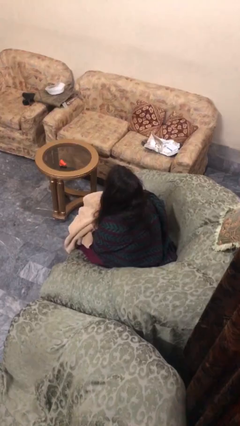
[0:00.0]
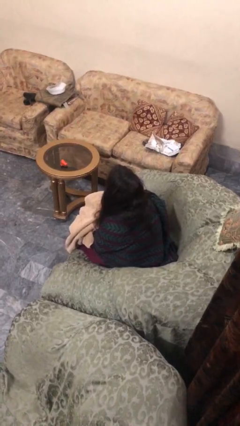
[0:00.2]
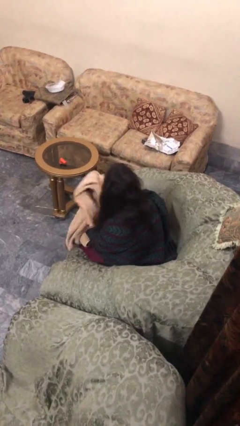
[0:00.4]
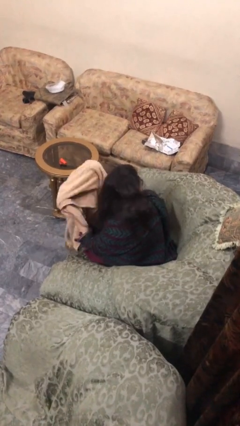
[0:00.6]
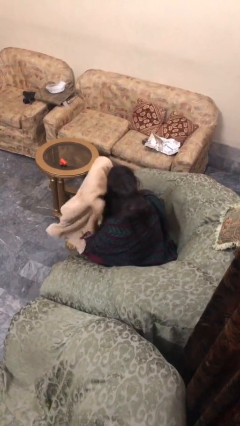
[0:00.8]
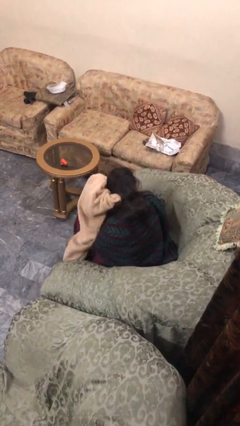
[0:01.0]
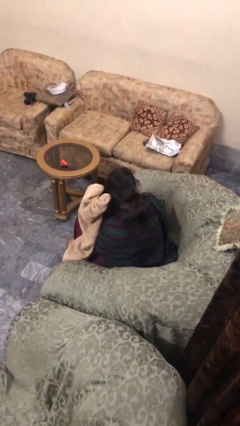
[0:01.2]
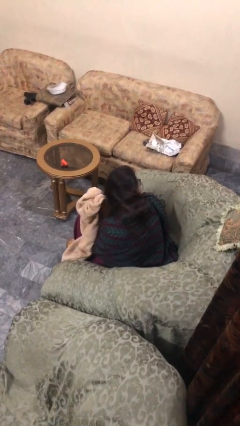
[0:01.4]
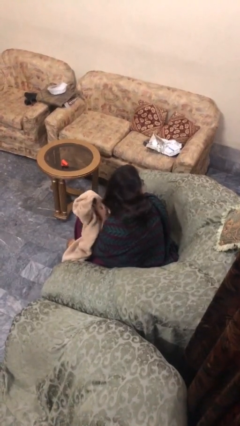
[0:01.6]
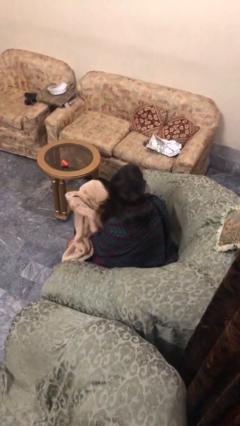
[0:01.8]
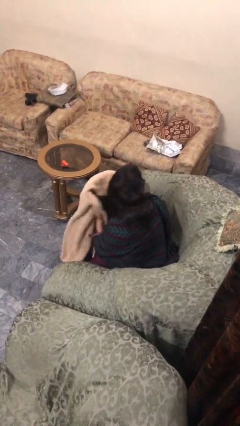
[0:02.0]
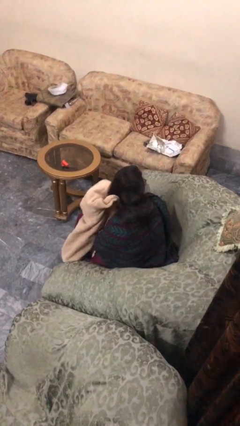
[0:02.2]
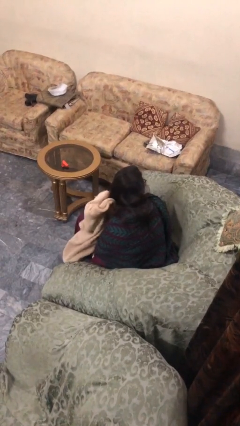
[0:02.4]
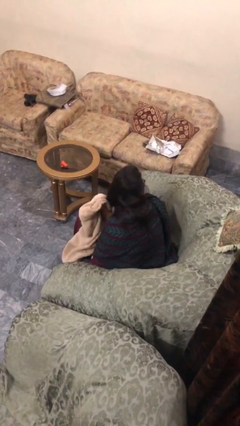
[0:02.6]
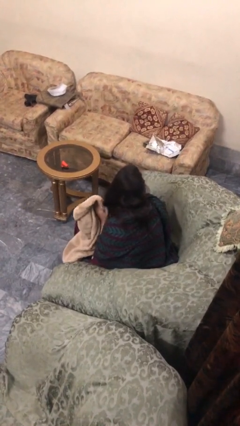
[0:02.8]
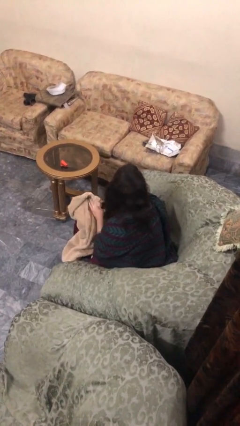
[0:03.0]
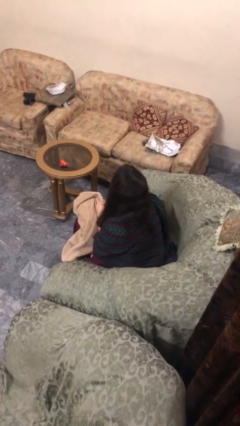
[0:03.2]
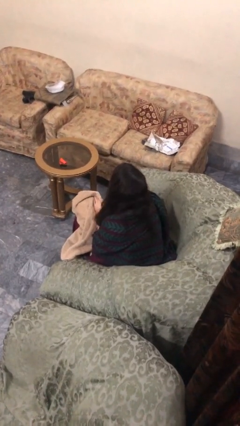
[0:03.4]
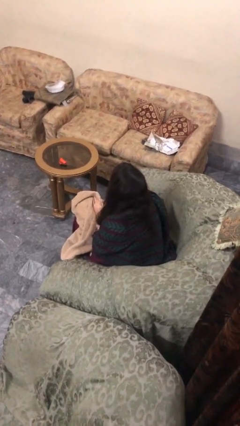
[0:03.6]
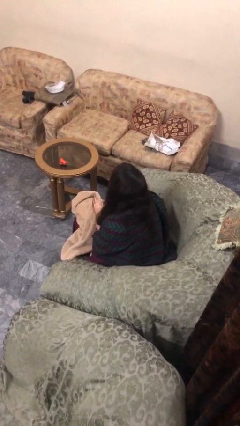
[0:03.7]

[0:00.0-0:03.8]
person dries hair with towel

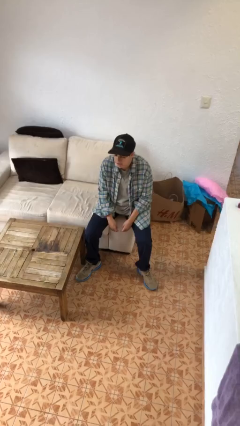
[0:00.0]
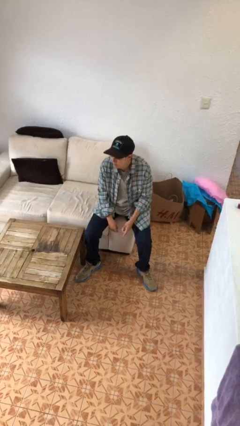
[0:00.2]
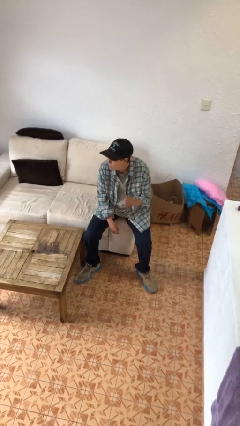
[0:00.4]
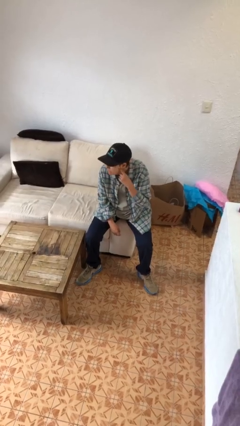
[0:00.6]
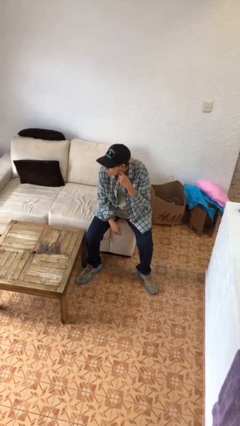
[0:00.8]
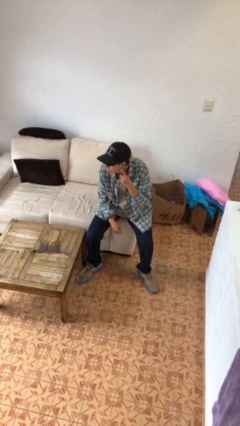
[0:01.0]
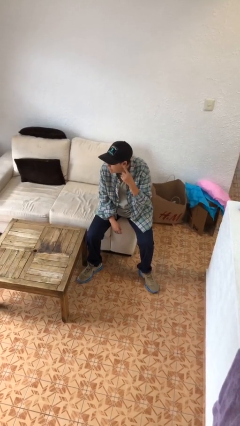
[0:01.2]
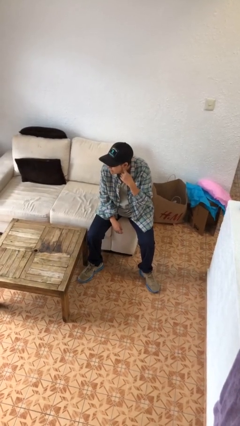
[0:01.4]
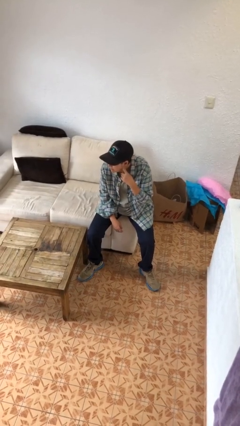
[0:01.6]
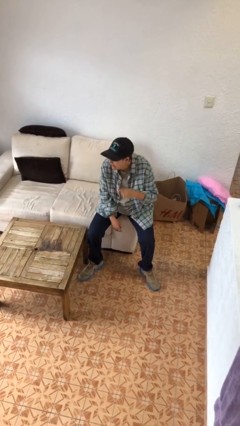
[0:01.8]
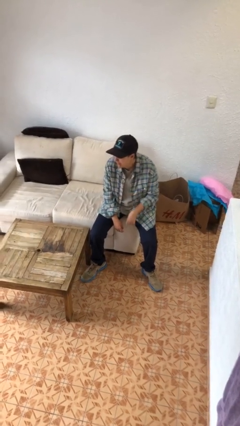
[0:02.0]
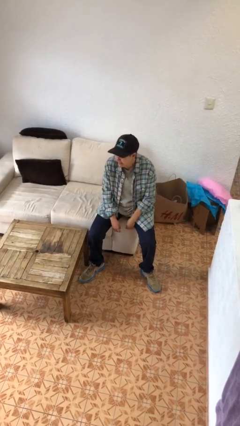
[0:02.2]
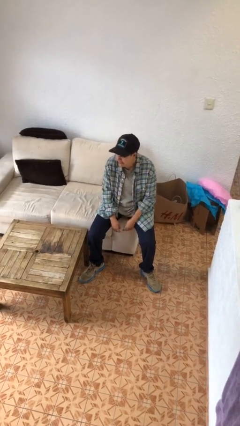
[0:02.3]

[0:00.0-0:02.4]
person gestures listen closely

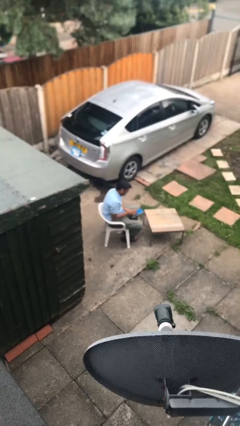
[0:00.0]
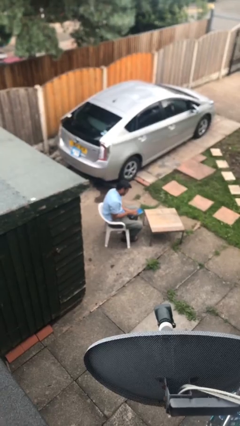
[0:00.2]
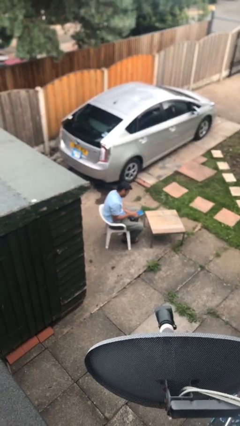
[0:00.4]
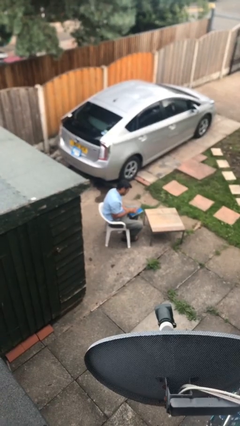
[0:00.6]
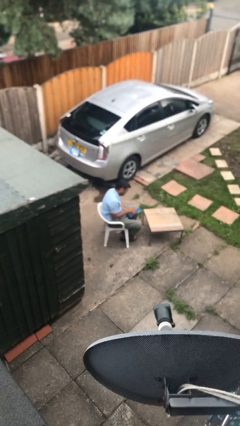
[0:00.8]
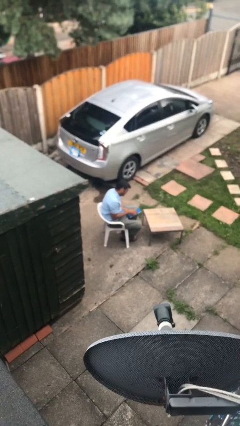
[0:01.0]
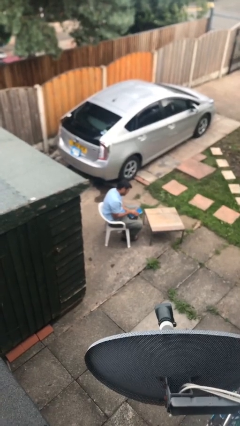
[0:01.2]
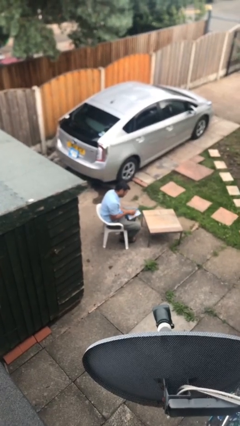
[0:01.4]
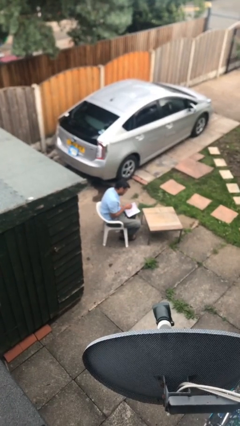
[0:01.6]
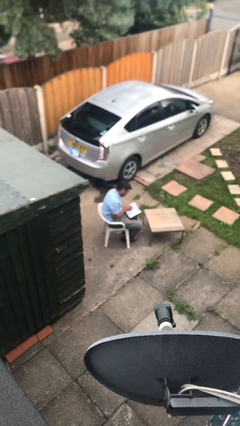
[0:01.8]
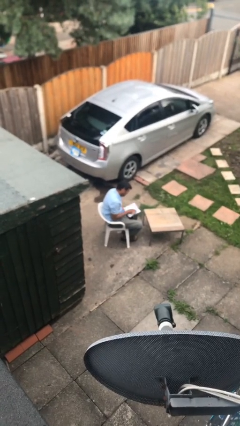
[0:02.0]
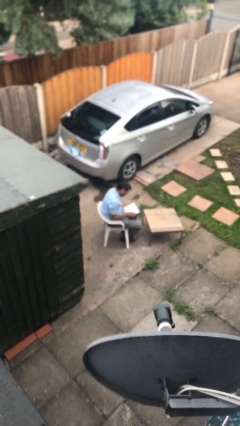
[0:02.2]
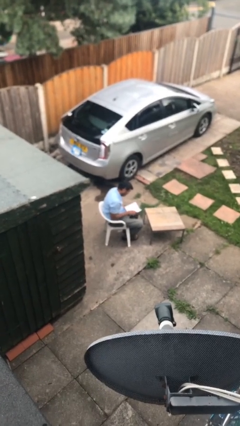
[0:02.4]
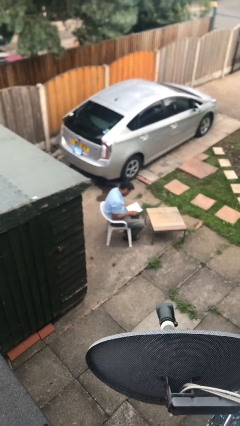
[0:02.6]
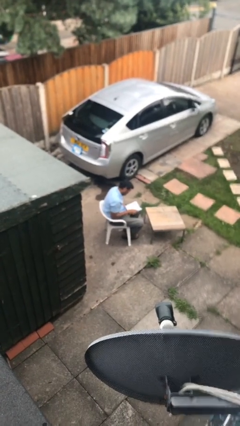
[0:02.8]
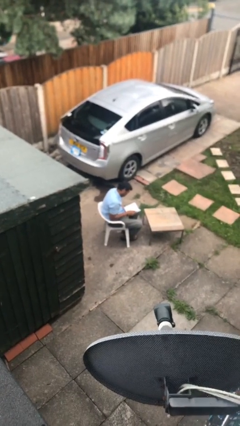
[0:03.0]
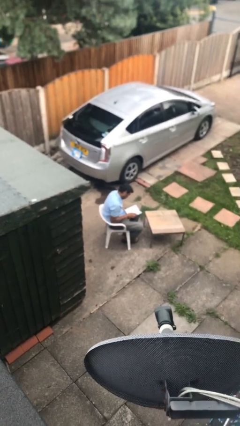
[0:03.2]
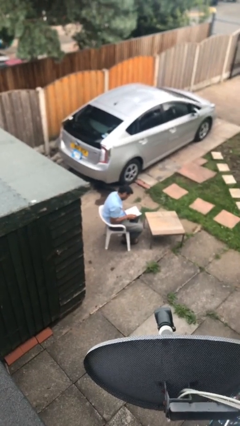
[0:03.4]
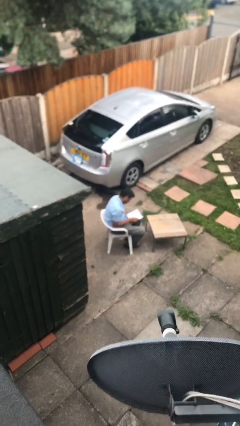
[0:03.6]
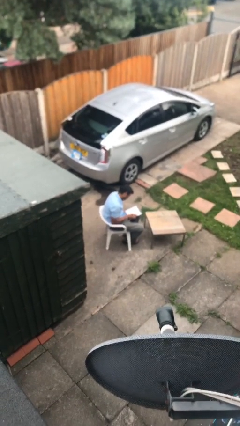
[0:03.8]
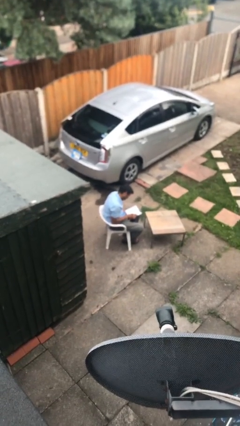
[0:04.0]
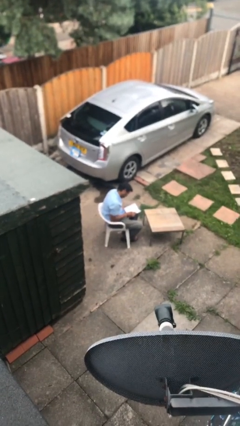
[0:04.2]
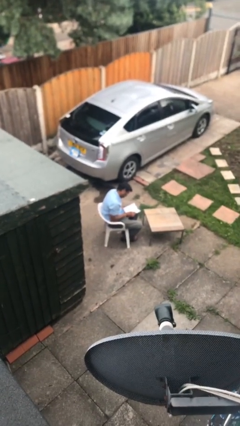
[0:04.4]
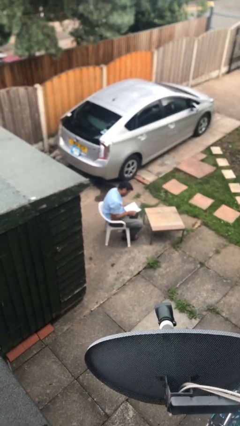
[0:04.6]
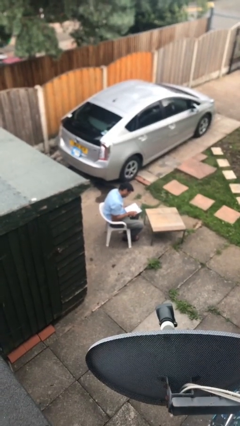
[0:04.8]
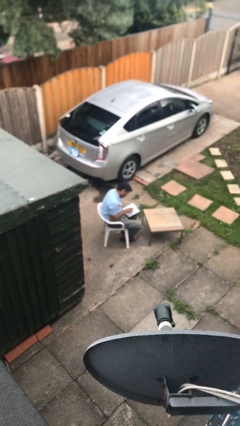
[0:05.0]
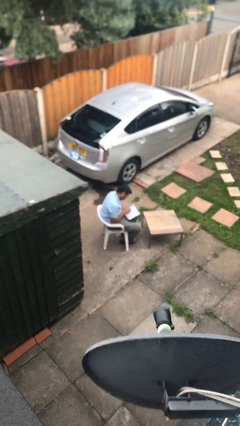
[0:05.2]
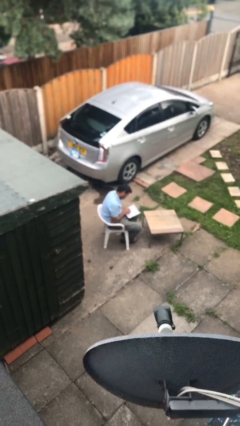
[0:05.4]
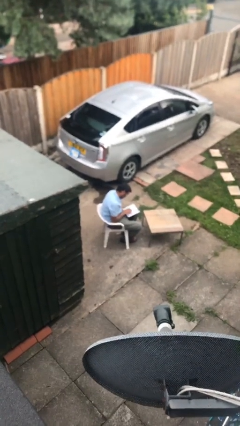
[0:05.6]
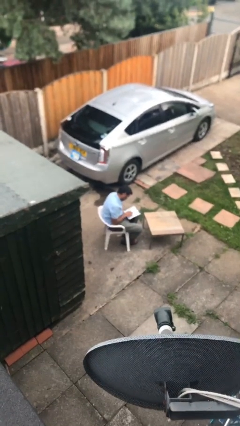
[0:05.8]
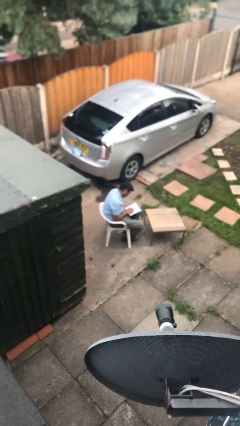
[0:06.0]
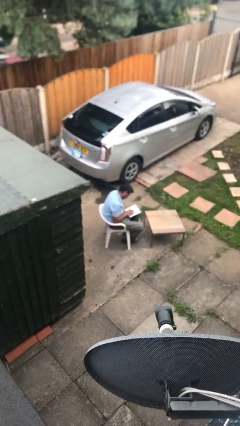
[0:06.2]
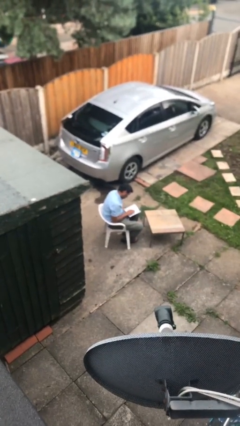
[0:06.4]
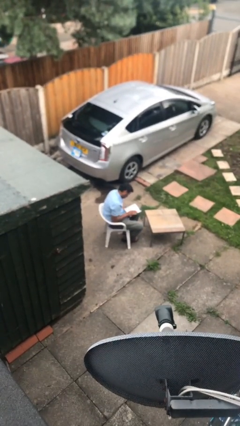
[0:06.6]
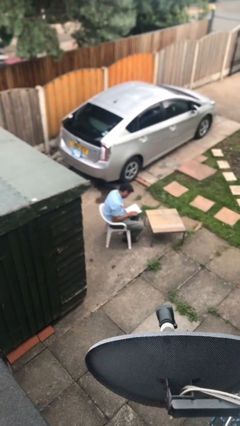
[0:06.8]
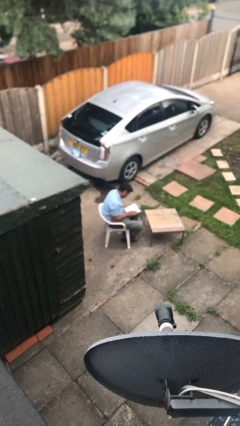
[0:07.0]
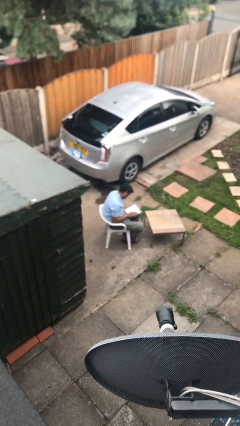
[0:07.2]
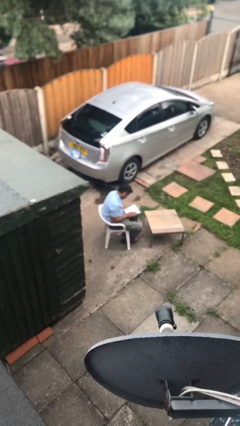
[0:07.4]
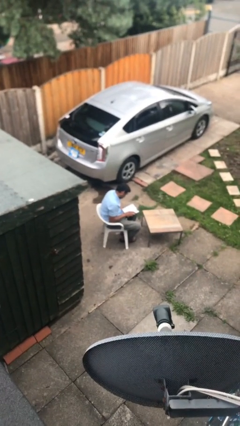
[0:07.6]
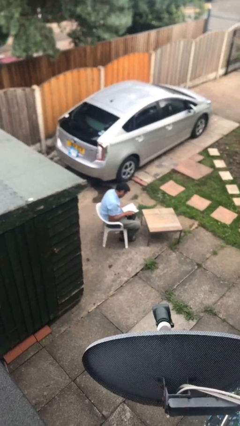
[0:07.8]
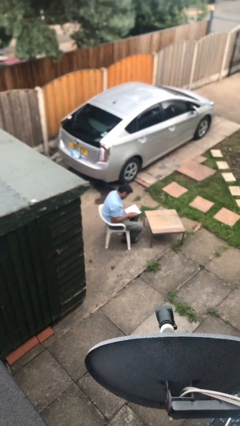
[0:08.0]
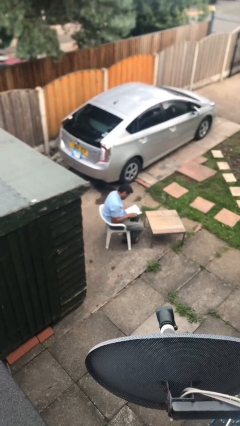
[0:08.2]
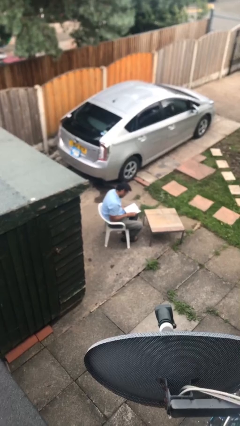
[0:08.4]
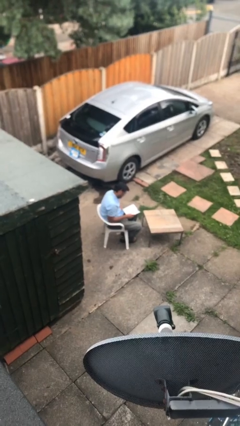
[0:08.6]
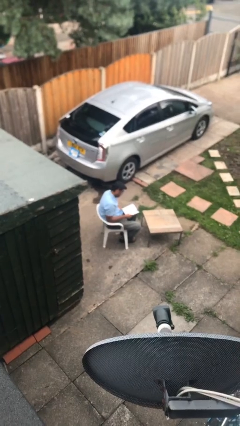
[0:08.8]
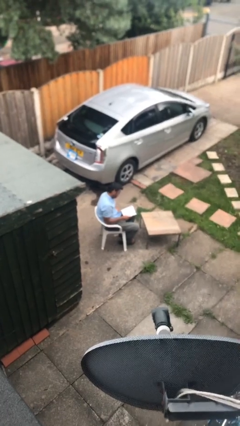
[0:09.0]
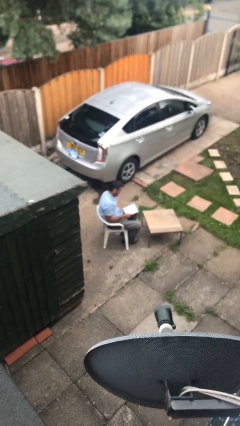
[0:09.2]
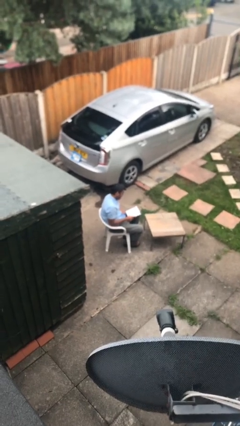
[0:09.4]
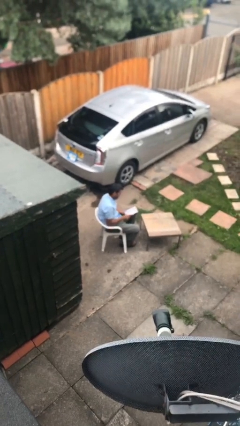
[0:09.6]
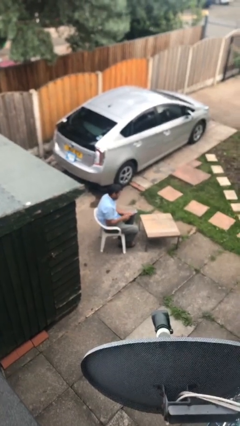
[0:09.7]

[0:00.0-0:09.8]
person reads document

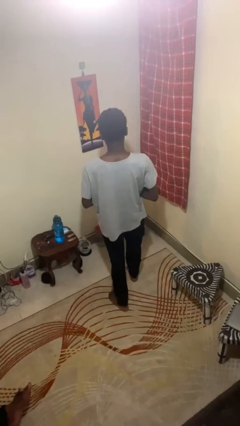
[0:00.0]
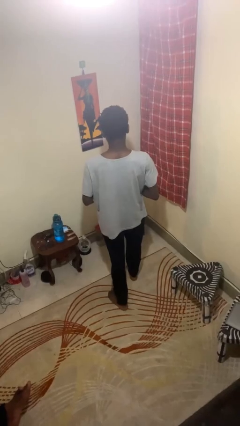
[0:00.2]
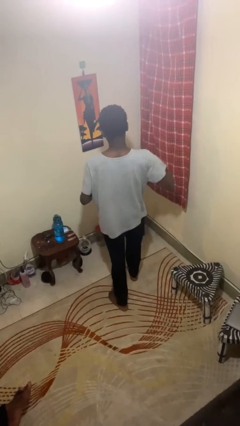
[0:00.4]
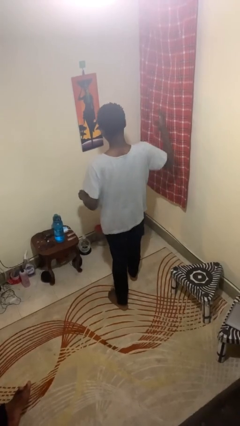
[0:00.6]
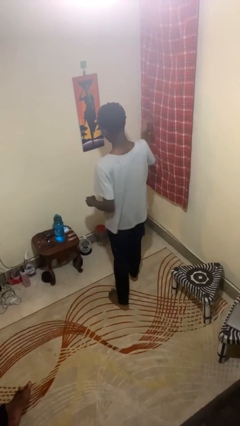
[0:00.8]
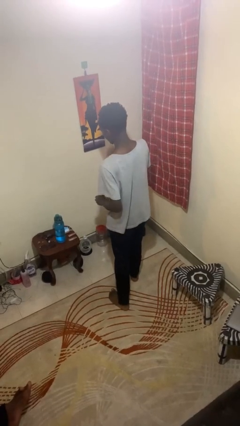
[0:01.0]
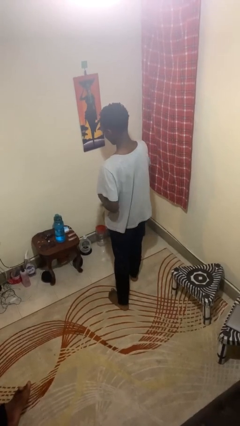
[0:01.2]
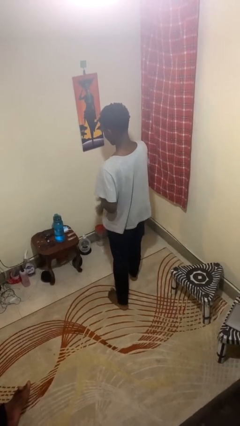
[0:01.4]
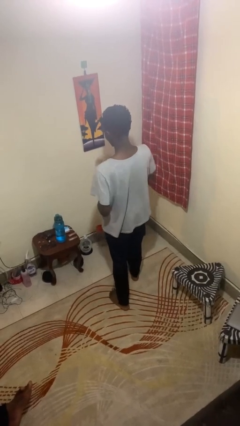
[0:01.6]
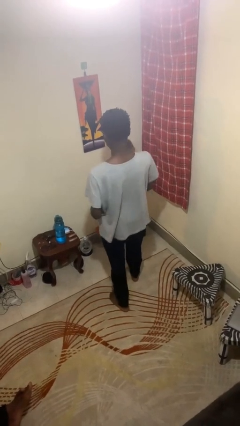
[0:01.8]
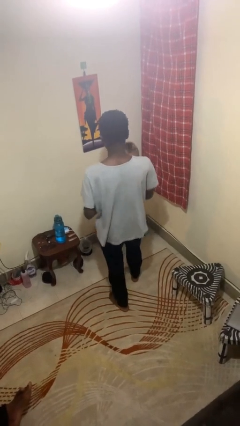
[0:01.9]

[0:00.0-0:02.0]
person karate chop
